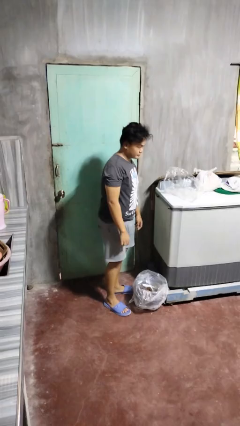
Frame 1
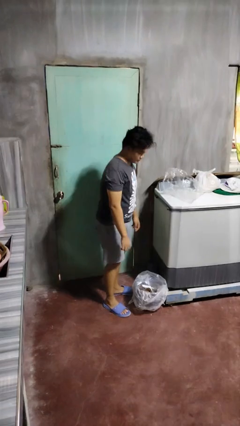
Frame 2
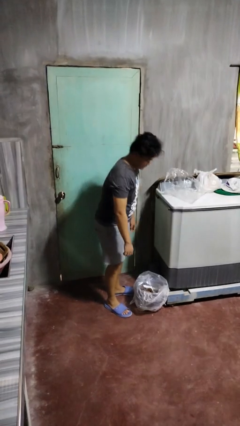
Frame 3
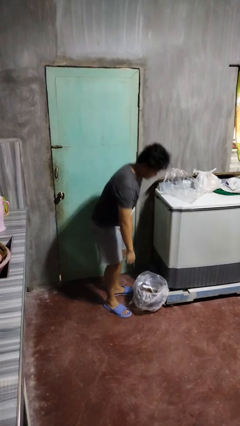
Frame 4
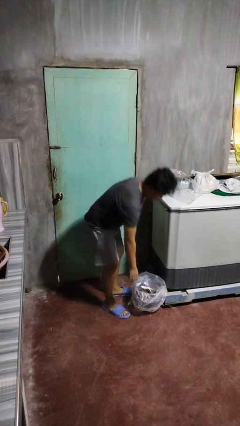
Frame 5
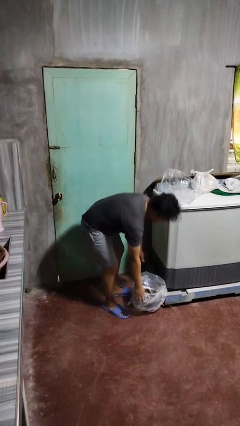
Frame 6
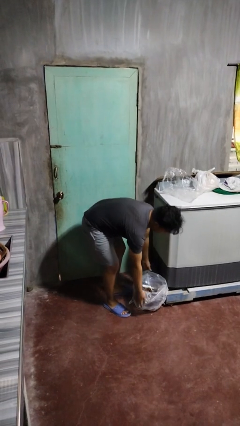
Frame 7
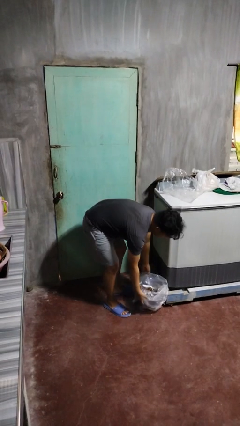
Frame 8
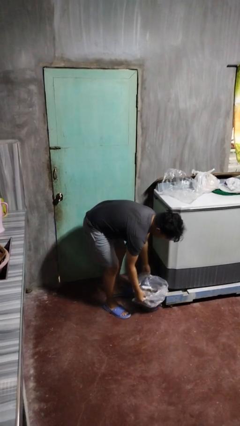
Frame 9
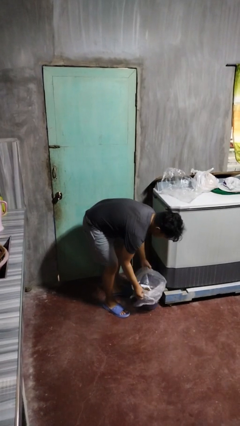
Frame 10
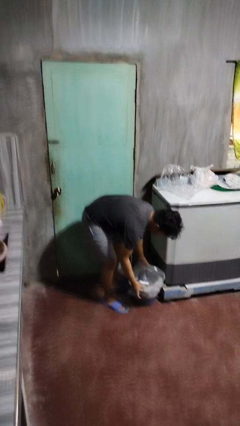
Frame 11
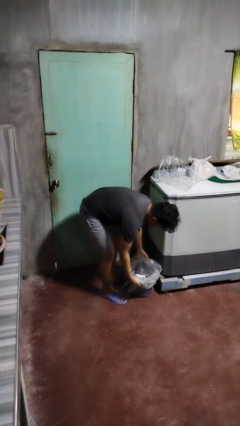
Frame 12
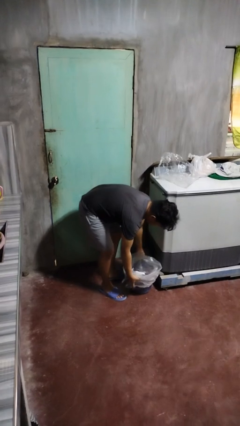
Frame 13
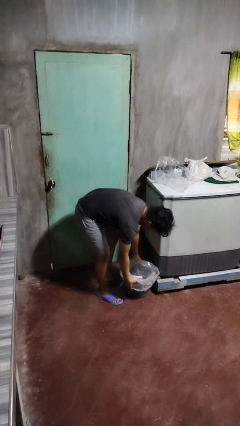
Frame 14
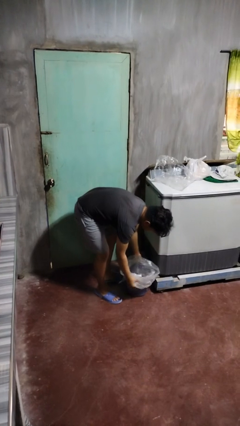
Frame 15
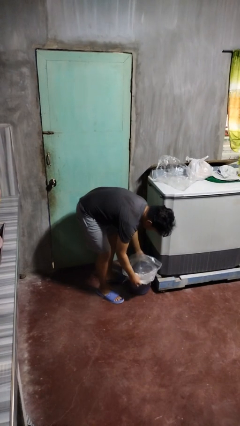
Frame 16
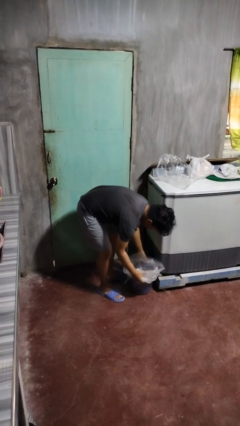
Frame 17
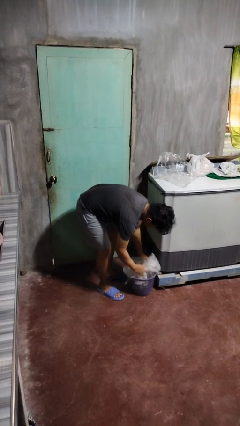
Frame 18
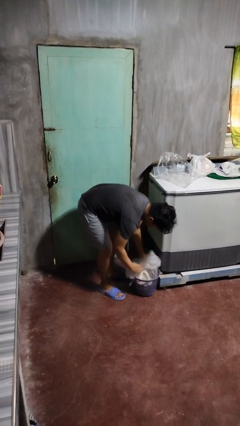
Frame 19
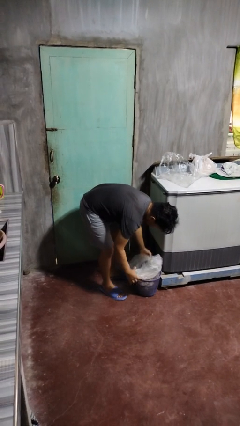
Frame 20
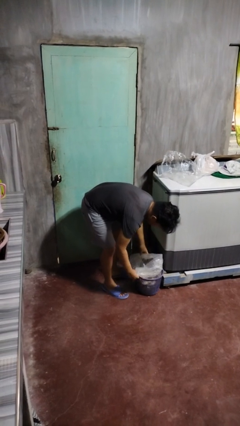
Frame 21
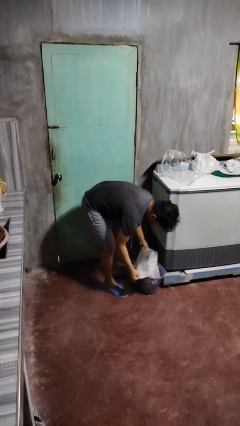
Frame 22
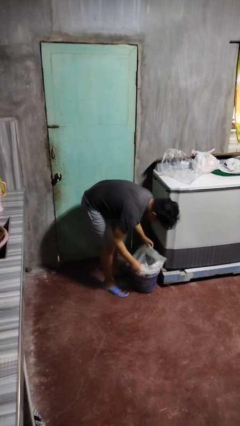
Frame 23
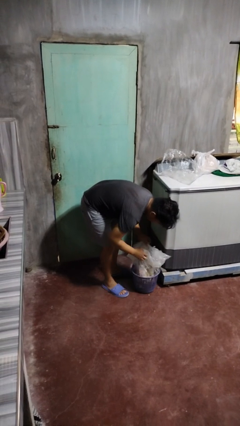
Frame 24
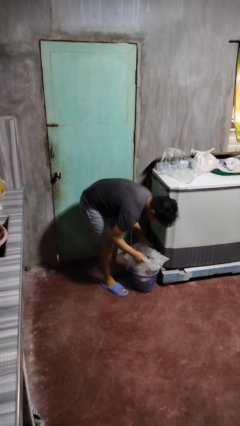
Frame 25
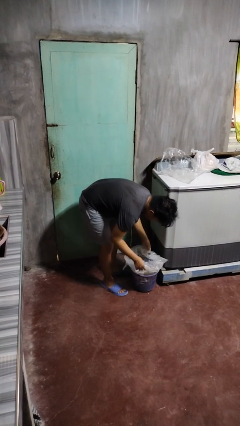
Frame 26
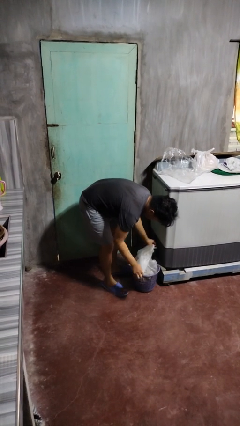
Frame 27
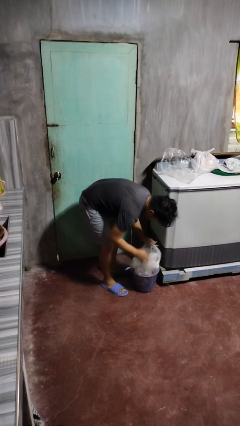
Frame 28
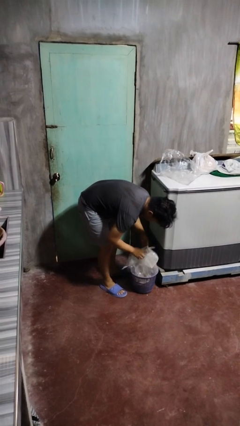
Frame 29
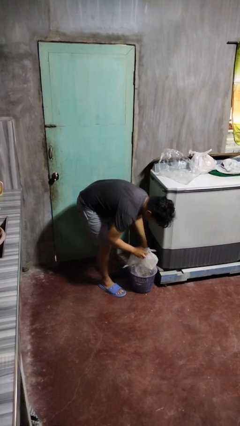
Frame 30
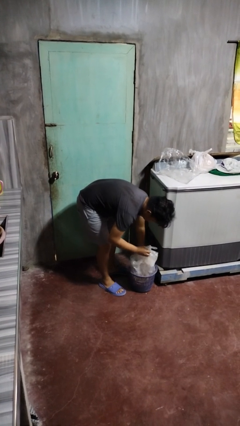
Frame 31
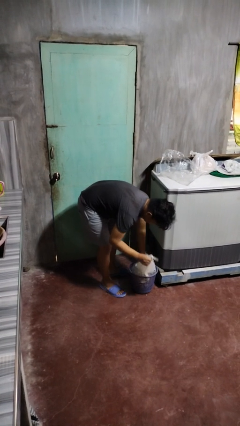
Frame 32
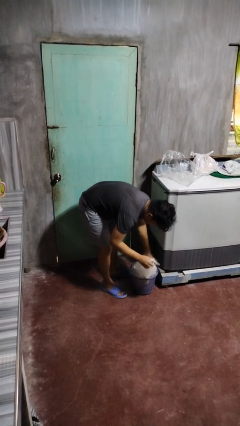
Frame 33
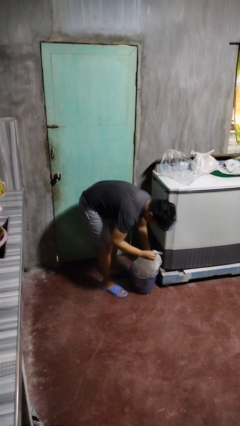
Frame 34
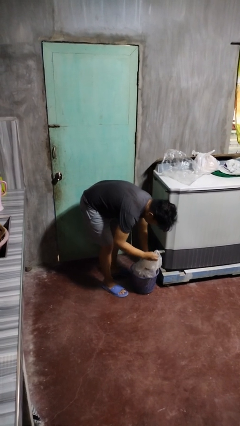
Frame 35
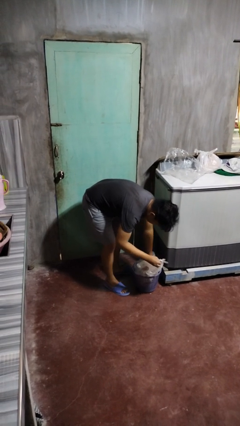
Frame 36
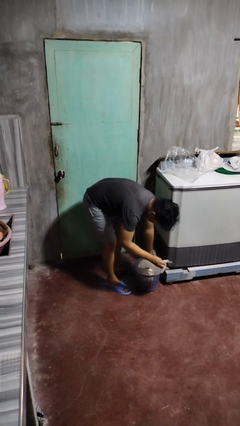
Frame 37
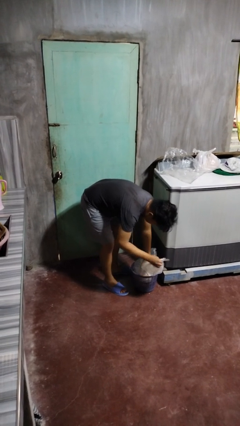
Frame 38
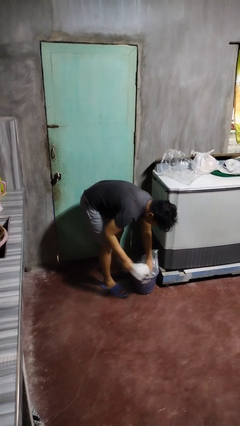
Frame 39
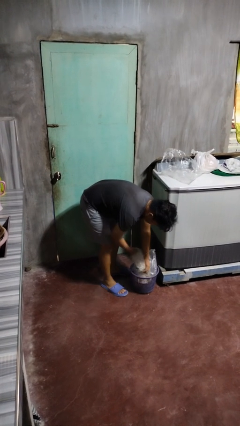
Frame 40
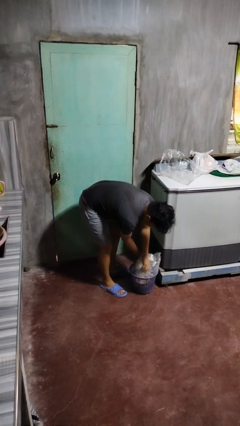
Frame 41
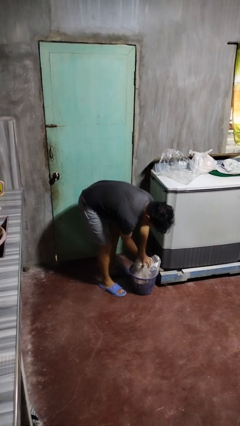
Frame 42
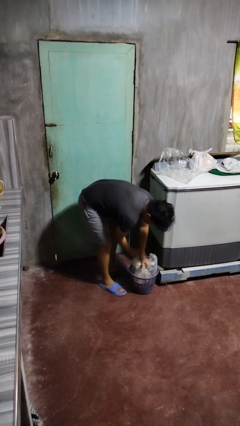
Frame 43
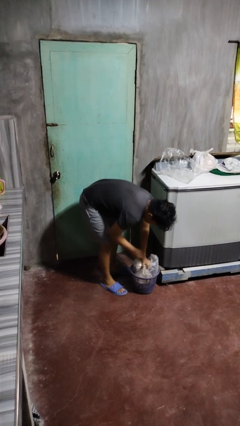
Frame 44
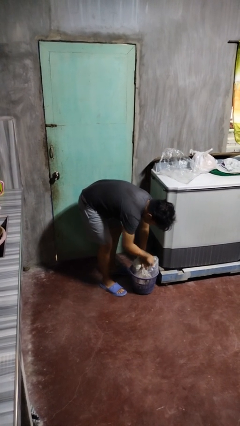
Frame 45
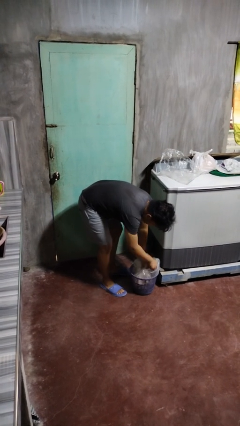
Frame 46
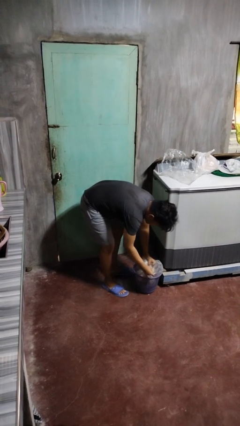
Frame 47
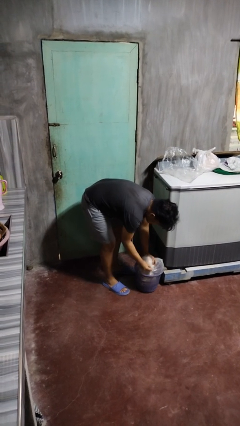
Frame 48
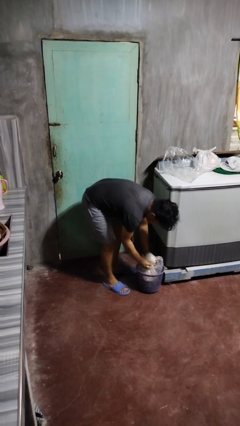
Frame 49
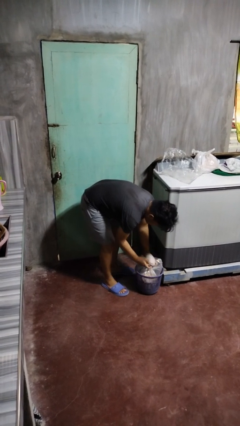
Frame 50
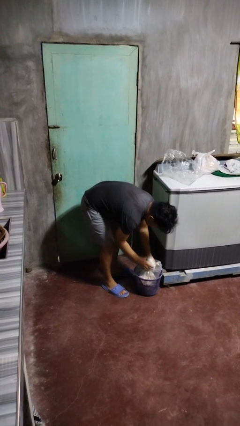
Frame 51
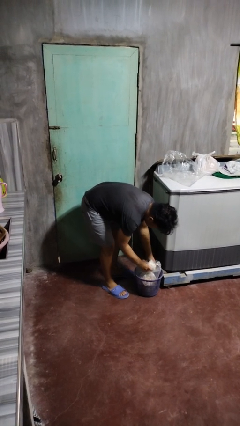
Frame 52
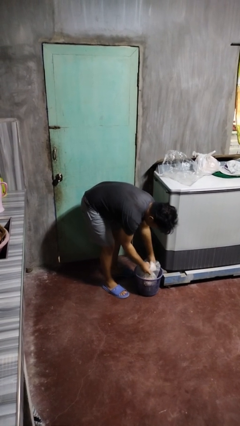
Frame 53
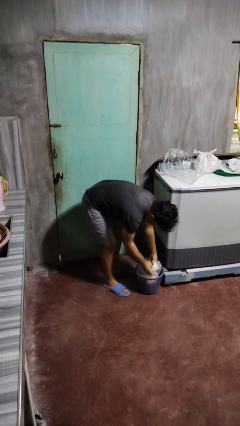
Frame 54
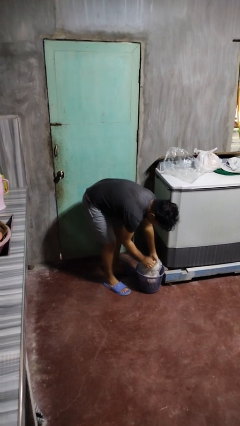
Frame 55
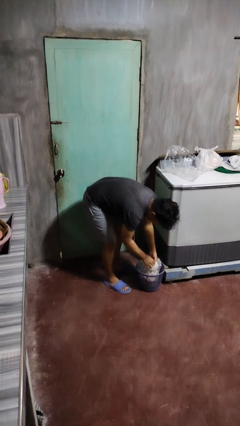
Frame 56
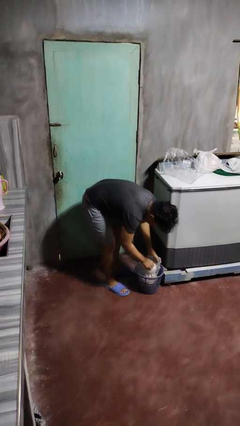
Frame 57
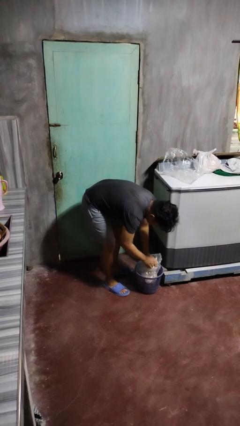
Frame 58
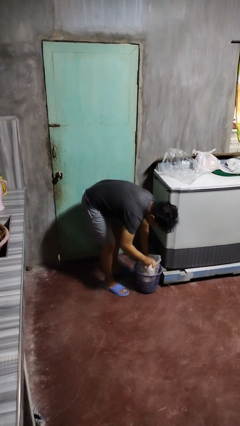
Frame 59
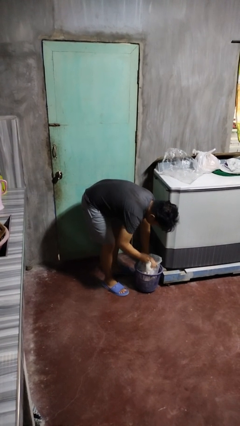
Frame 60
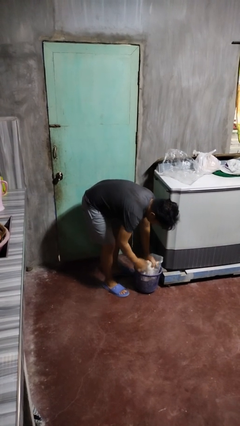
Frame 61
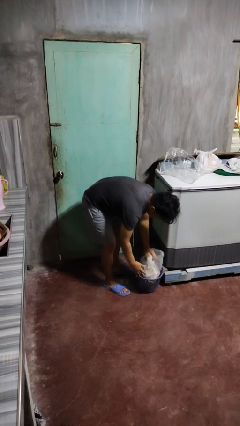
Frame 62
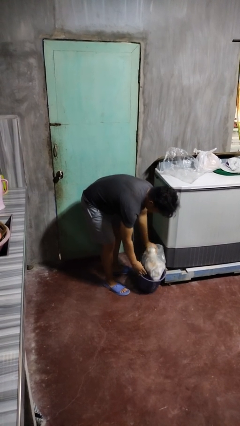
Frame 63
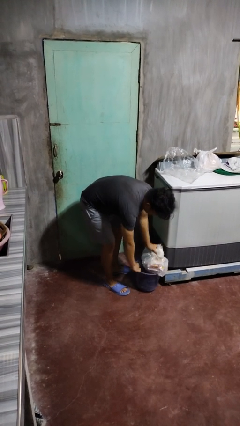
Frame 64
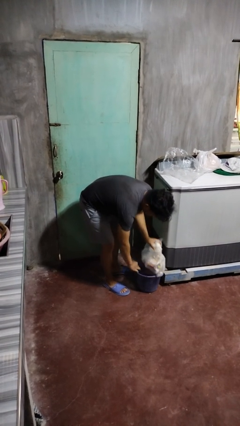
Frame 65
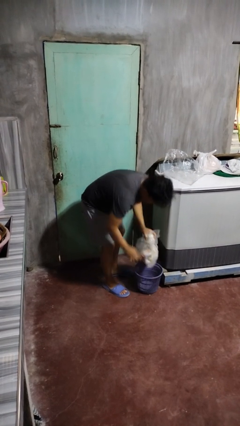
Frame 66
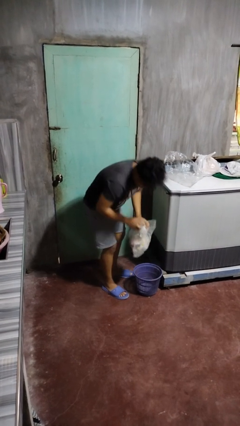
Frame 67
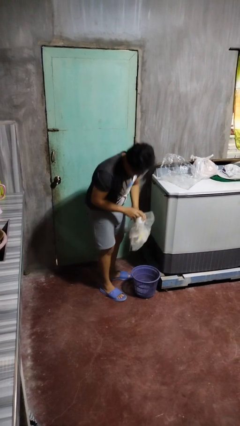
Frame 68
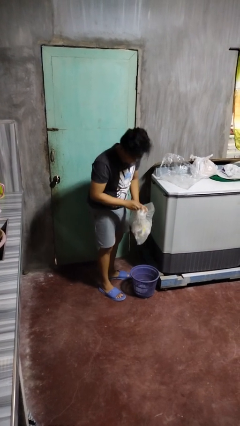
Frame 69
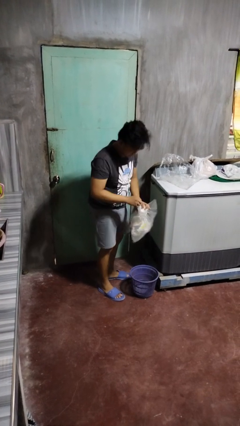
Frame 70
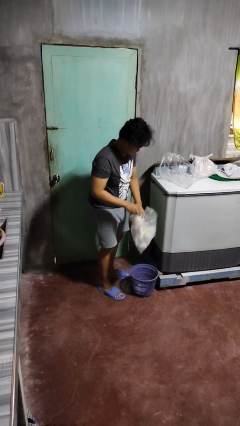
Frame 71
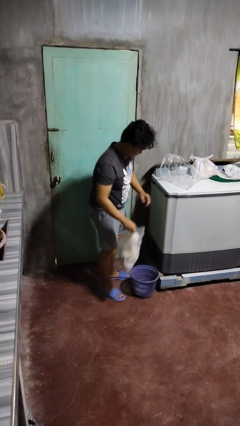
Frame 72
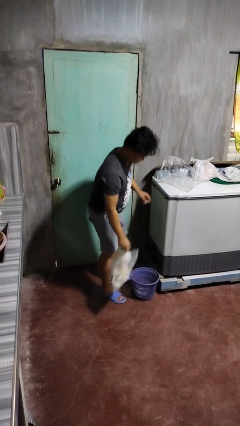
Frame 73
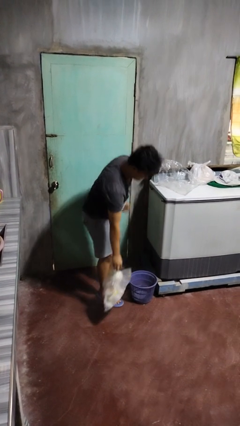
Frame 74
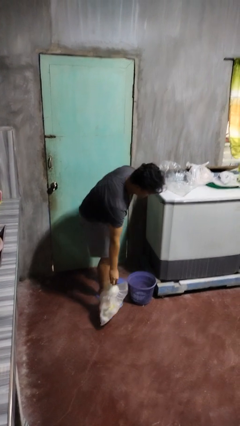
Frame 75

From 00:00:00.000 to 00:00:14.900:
person removes trashbag from trashcan

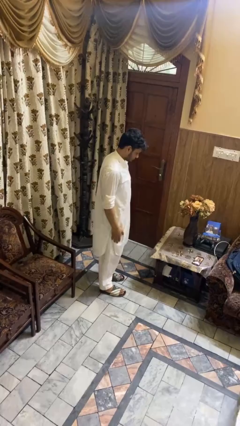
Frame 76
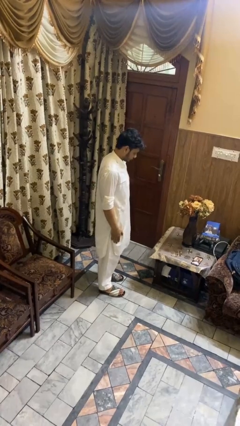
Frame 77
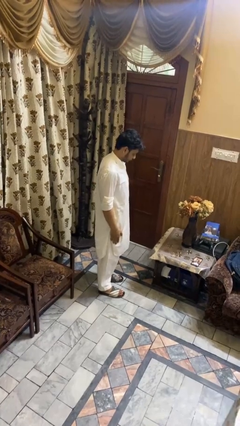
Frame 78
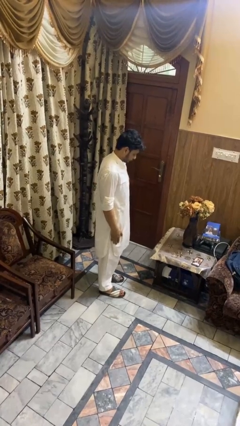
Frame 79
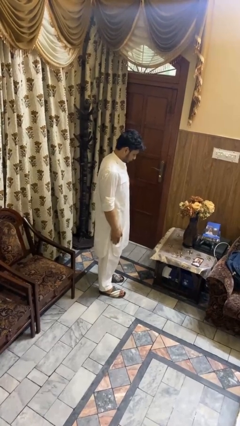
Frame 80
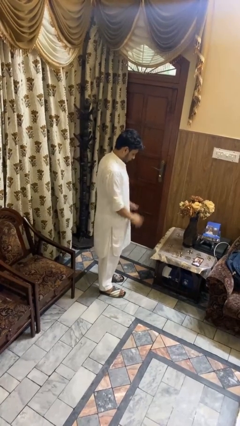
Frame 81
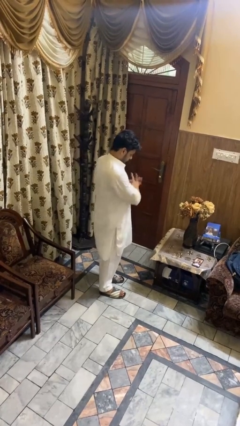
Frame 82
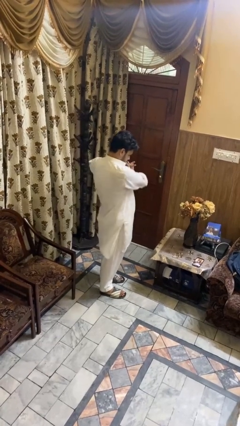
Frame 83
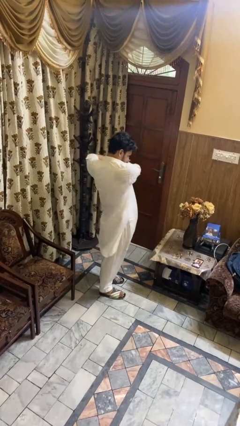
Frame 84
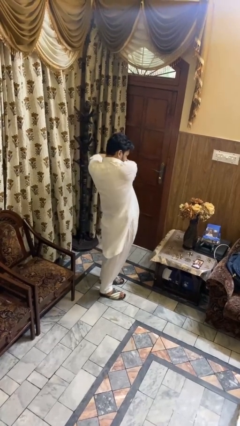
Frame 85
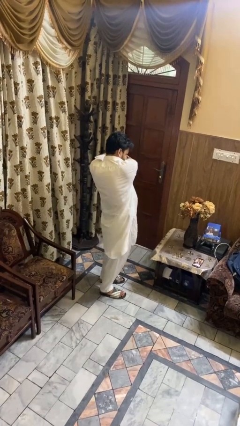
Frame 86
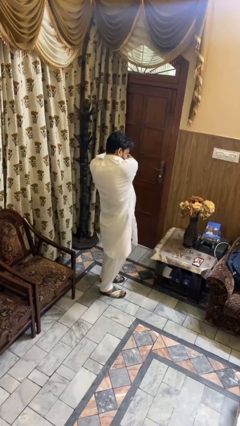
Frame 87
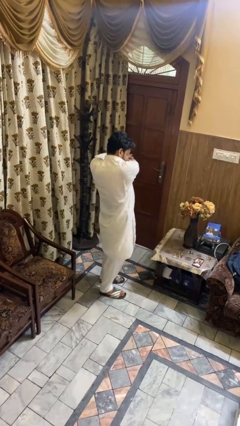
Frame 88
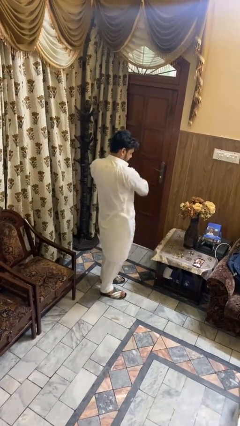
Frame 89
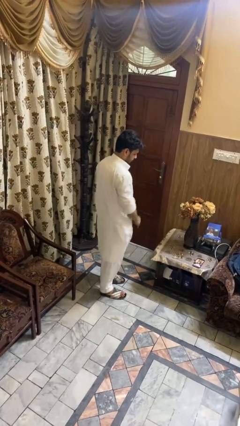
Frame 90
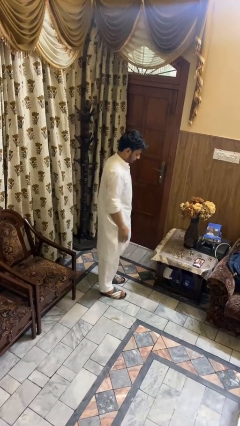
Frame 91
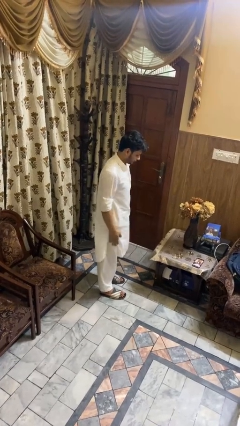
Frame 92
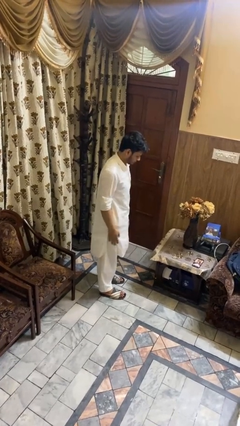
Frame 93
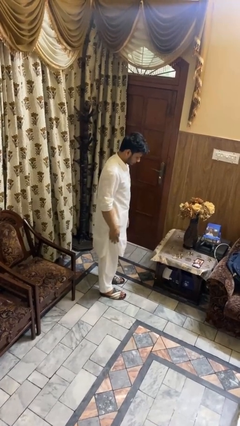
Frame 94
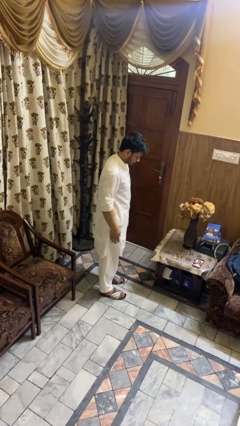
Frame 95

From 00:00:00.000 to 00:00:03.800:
person stretches arms to side
